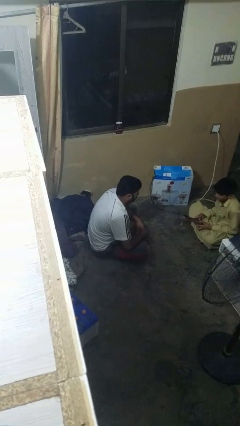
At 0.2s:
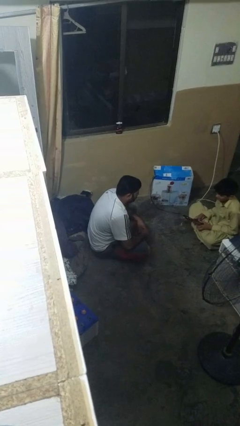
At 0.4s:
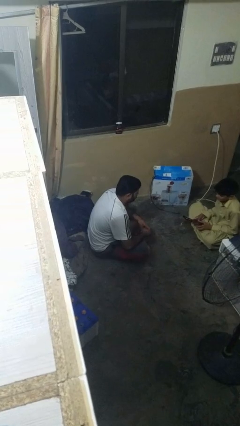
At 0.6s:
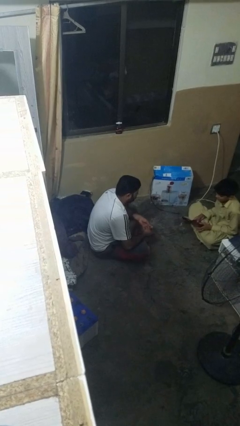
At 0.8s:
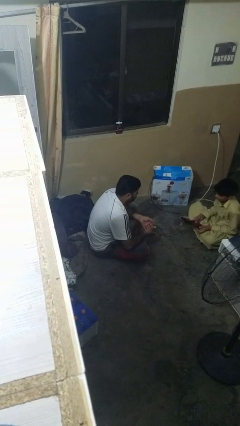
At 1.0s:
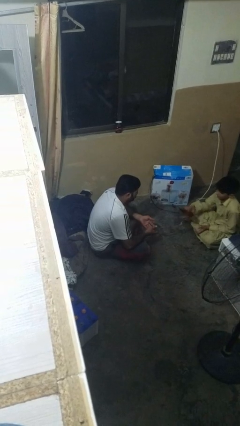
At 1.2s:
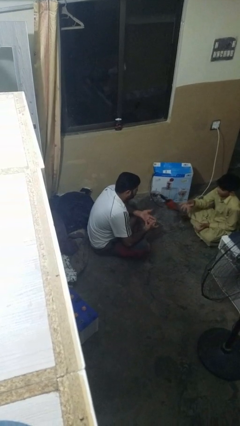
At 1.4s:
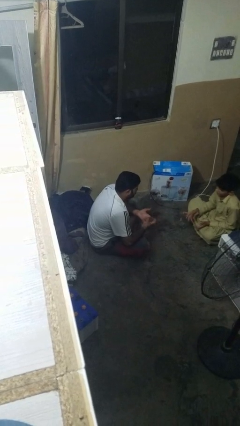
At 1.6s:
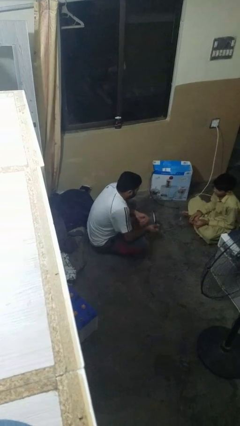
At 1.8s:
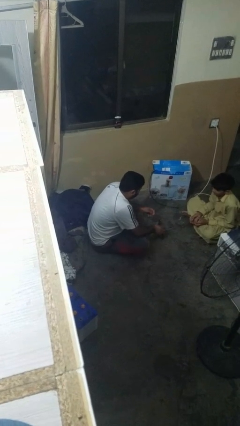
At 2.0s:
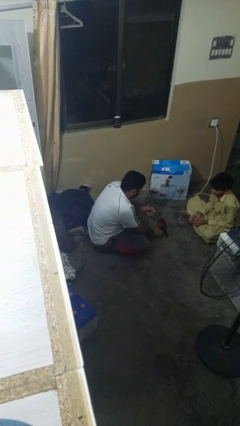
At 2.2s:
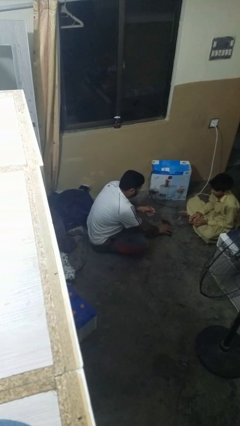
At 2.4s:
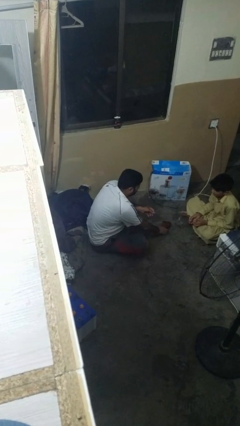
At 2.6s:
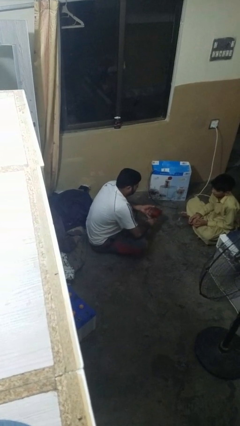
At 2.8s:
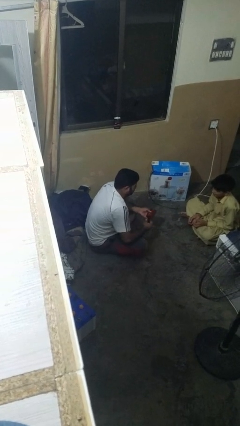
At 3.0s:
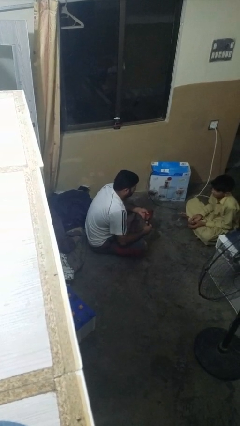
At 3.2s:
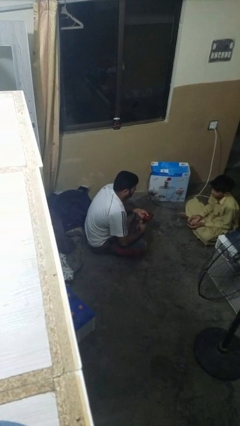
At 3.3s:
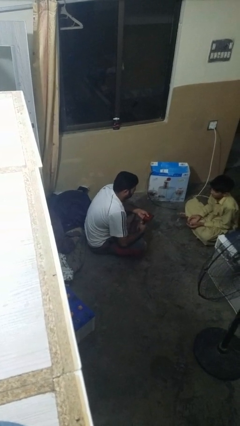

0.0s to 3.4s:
person catches object from person

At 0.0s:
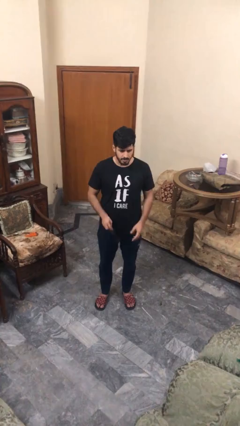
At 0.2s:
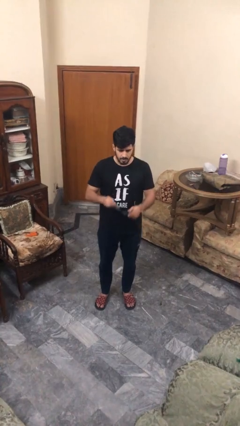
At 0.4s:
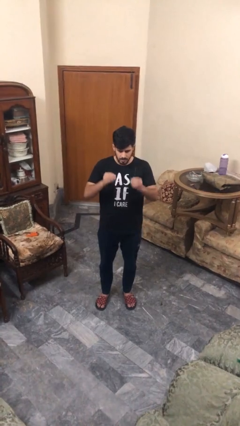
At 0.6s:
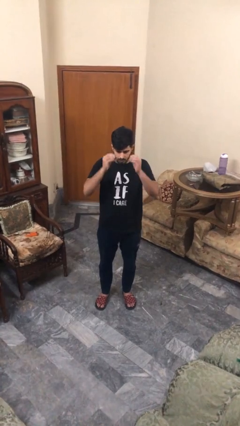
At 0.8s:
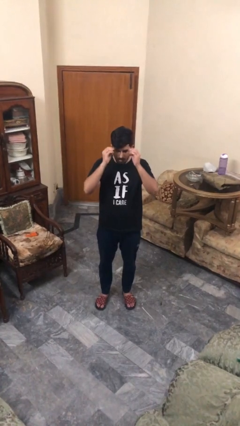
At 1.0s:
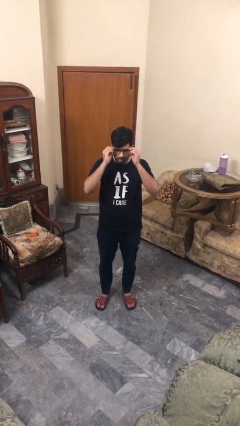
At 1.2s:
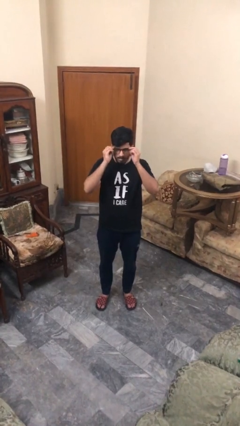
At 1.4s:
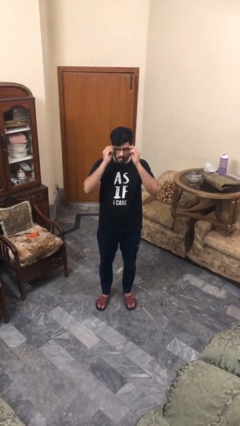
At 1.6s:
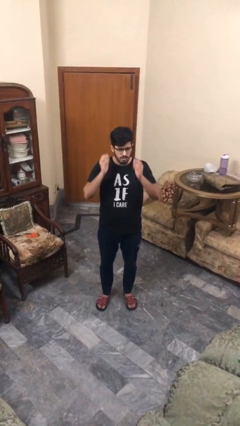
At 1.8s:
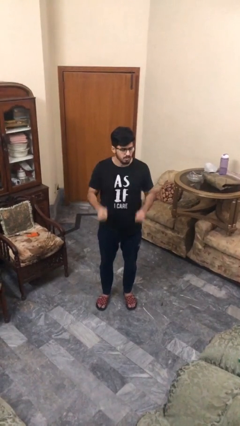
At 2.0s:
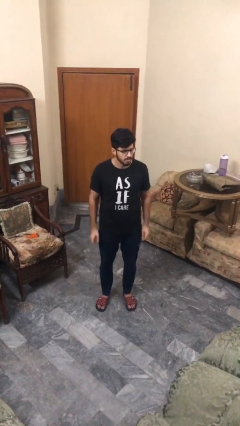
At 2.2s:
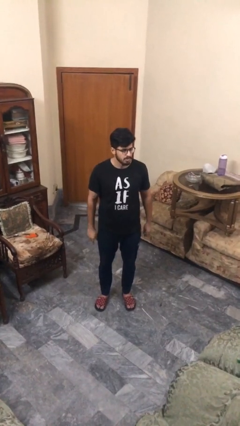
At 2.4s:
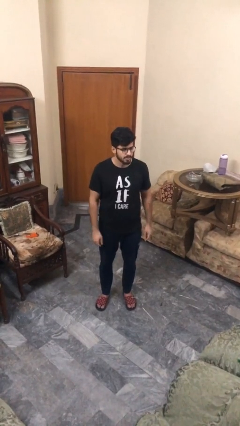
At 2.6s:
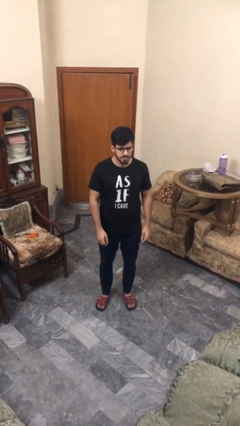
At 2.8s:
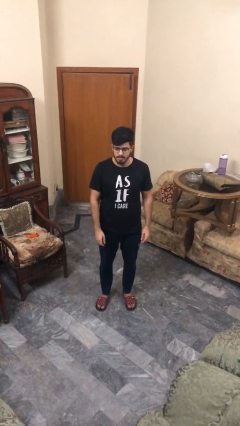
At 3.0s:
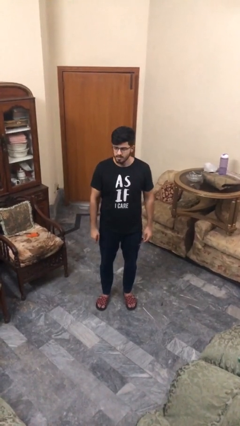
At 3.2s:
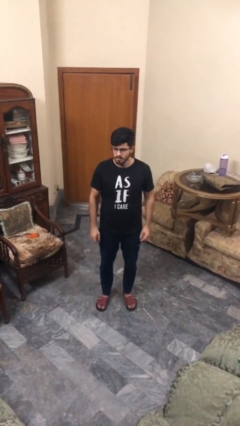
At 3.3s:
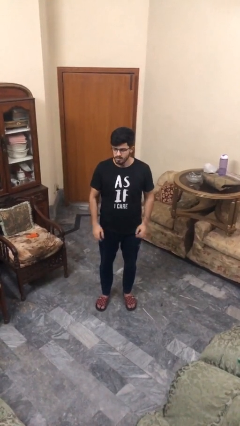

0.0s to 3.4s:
person puts on glasses

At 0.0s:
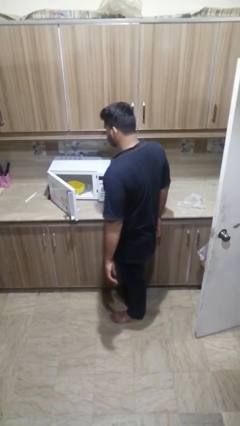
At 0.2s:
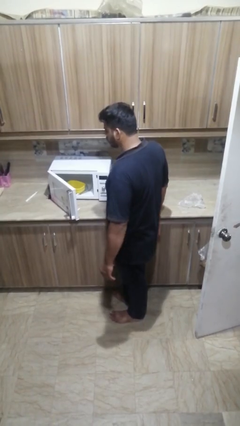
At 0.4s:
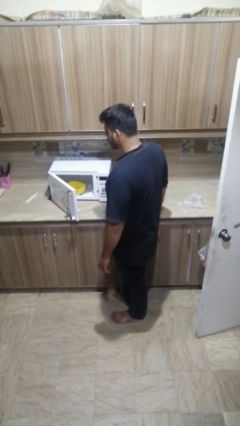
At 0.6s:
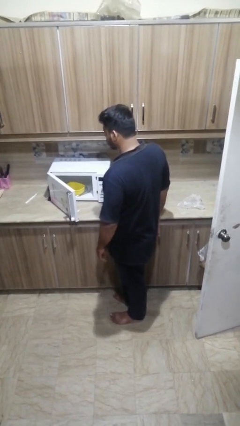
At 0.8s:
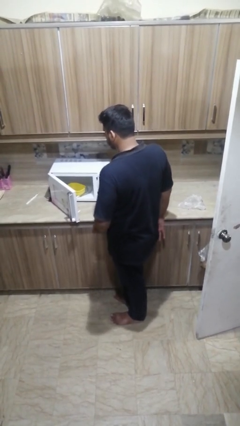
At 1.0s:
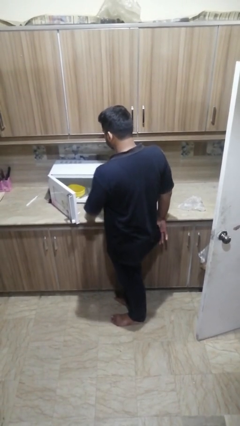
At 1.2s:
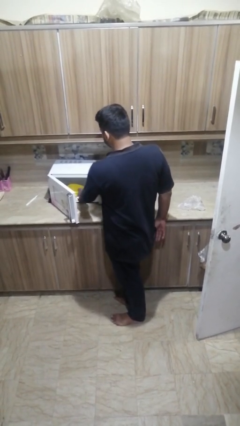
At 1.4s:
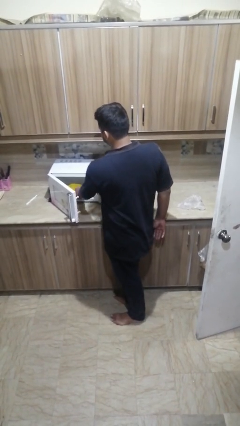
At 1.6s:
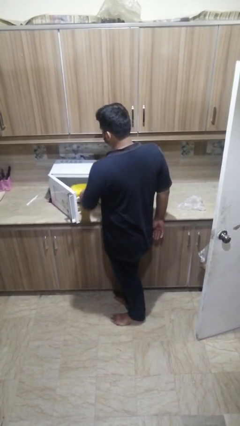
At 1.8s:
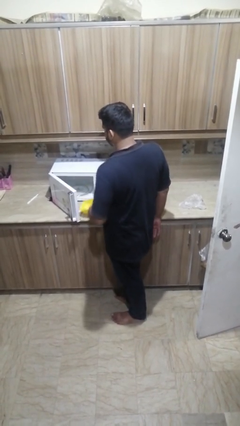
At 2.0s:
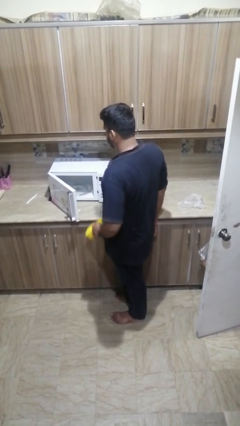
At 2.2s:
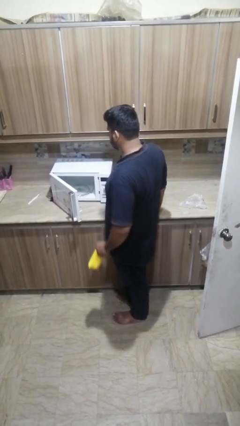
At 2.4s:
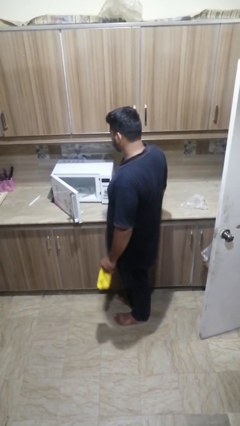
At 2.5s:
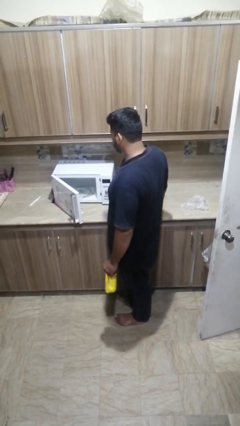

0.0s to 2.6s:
person takes object from microwave

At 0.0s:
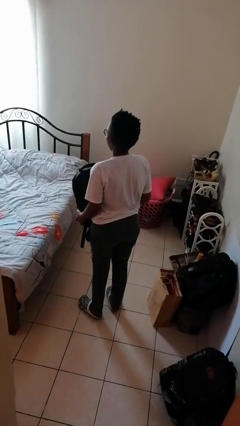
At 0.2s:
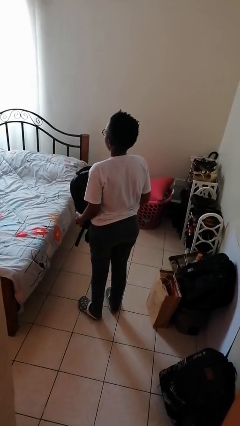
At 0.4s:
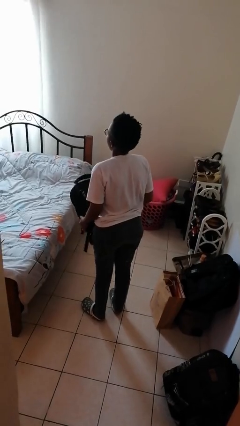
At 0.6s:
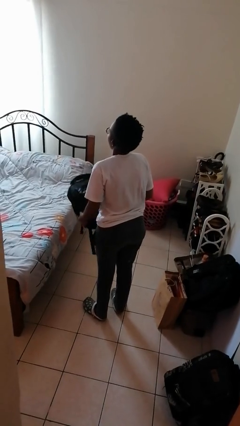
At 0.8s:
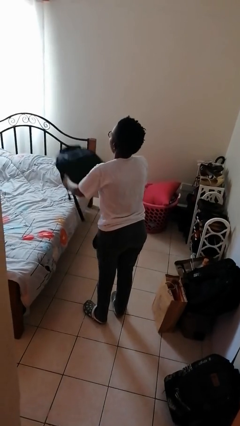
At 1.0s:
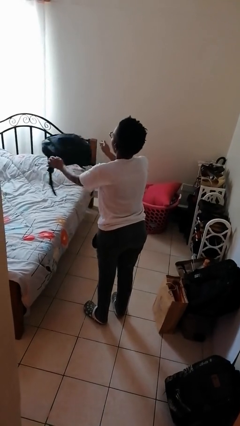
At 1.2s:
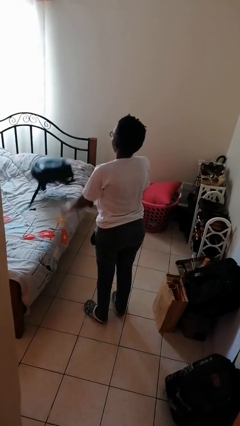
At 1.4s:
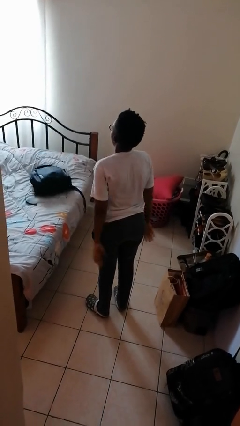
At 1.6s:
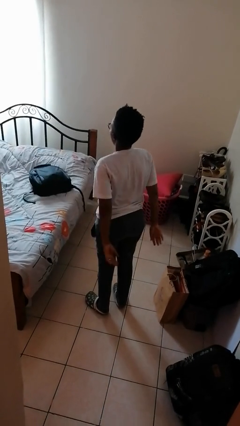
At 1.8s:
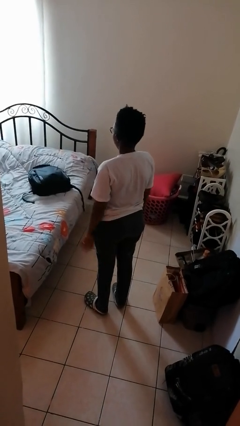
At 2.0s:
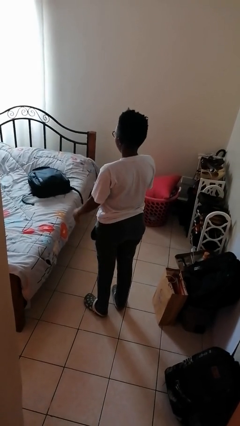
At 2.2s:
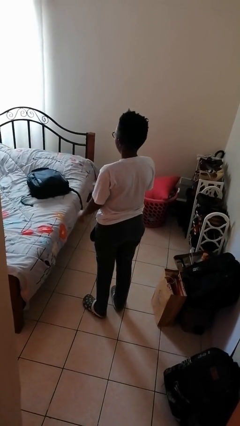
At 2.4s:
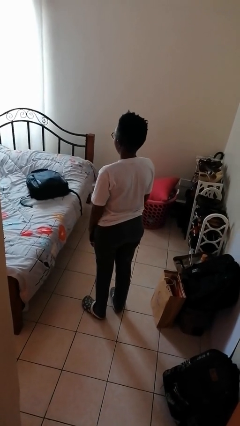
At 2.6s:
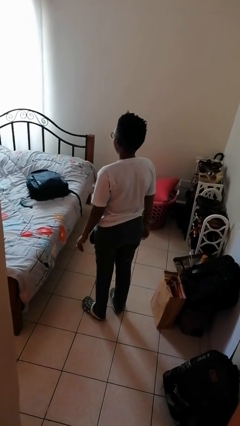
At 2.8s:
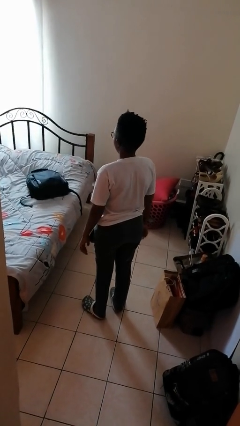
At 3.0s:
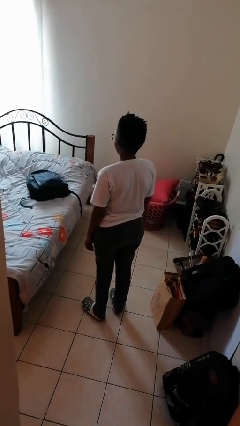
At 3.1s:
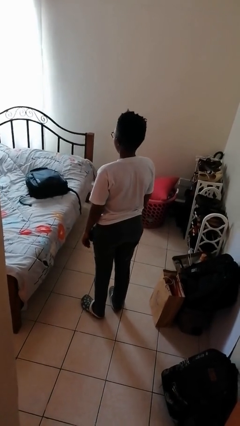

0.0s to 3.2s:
person throws object on bed

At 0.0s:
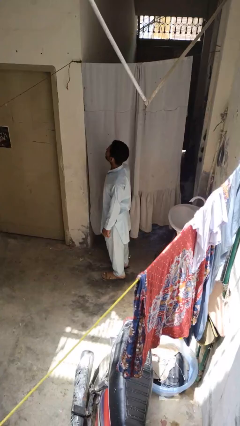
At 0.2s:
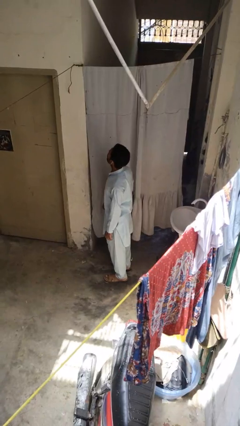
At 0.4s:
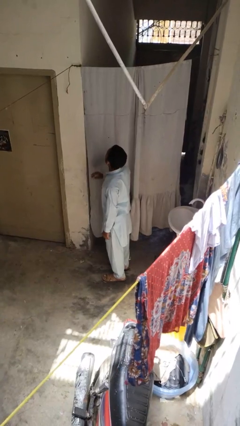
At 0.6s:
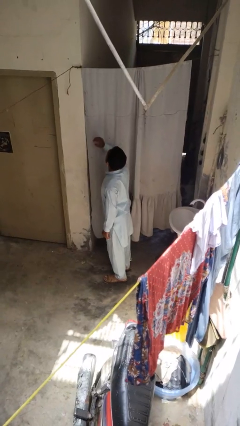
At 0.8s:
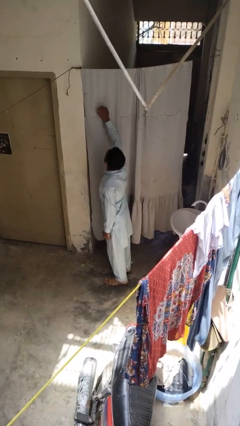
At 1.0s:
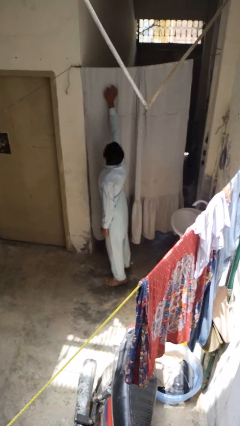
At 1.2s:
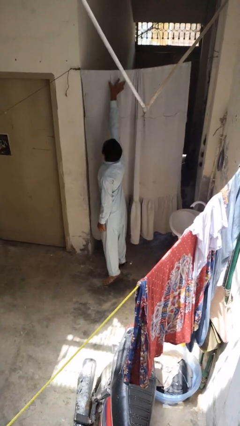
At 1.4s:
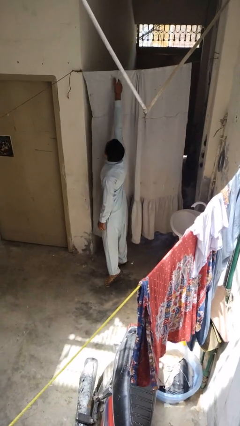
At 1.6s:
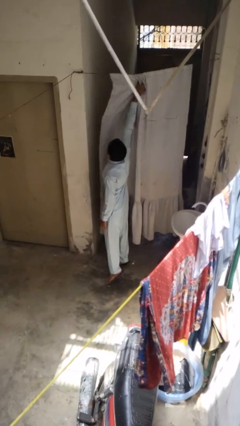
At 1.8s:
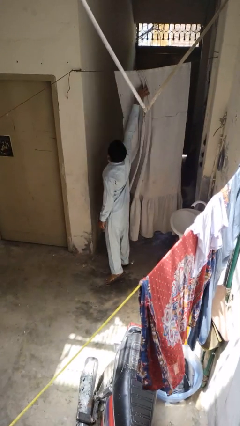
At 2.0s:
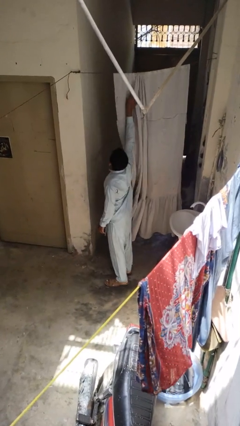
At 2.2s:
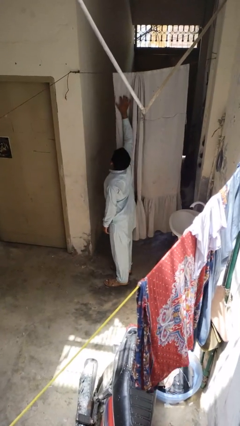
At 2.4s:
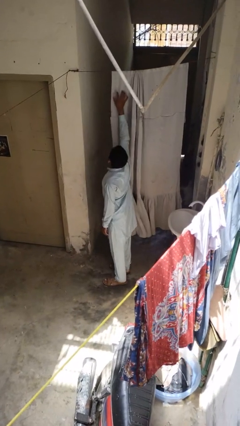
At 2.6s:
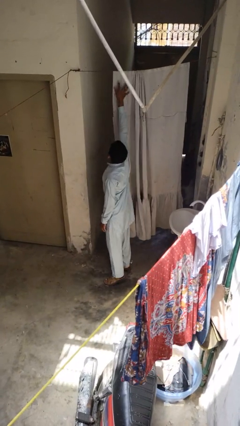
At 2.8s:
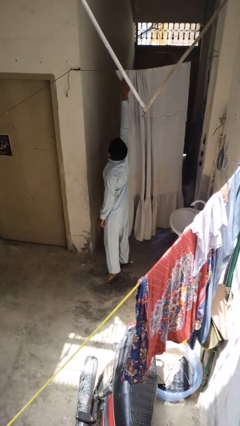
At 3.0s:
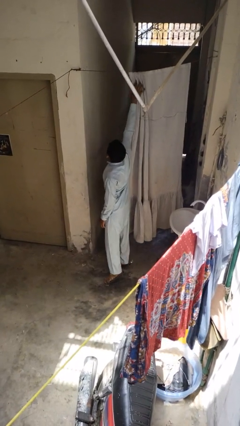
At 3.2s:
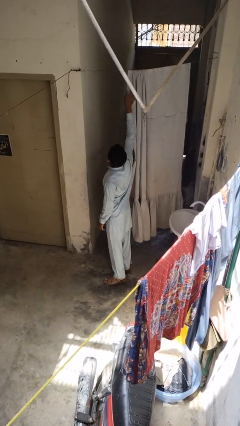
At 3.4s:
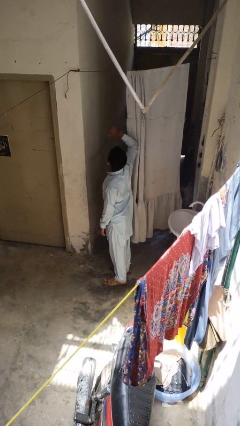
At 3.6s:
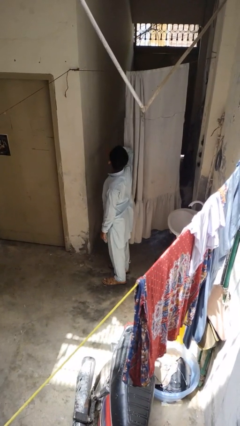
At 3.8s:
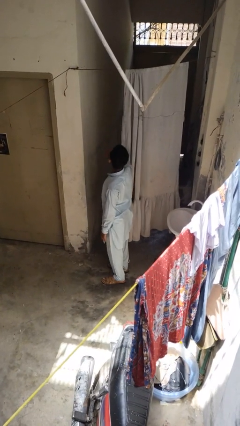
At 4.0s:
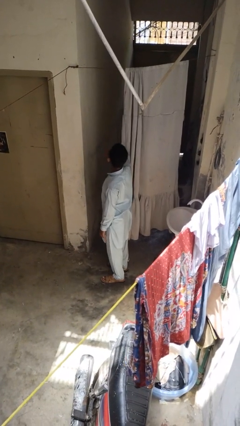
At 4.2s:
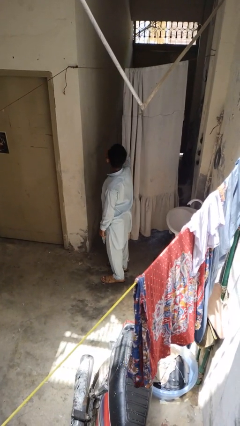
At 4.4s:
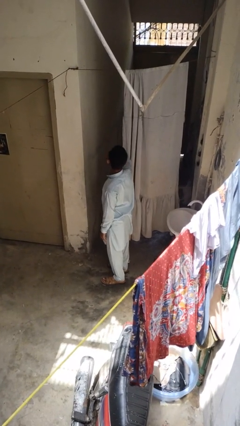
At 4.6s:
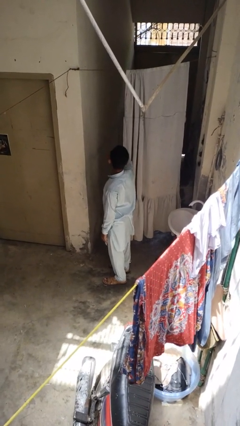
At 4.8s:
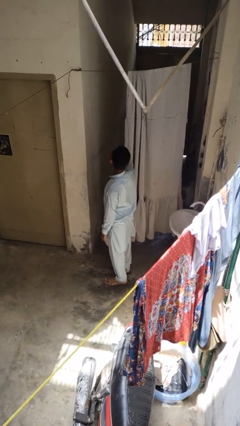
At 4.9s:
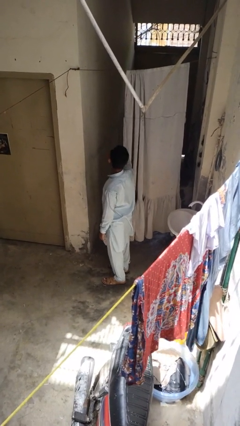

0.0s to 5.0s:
person opens curtains

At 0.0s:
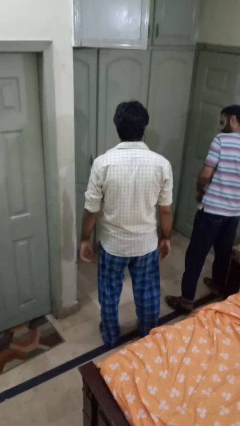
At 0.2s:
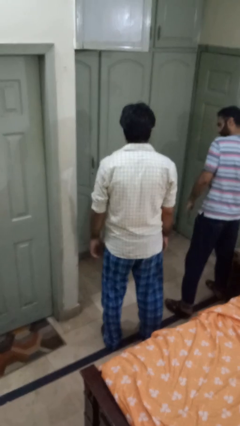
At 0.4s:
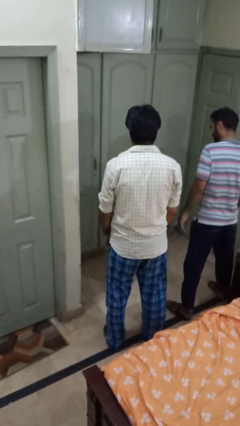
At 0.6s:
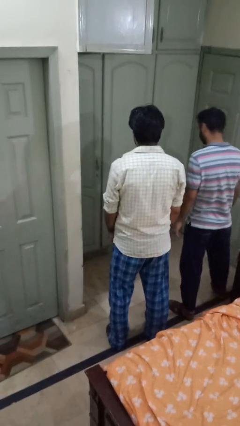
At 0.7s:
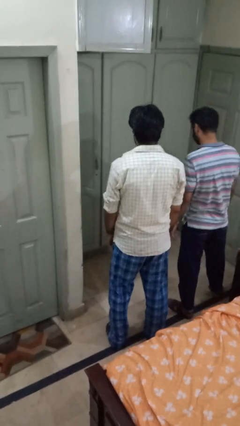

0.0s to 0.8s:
person shoves person
